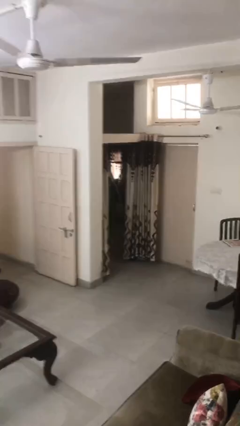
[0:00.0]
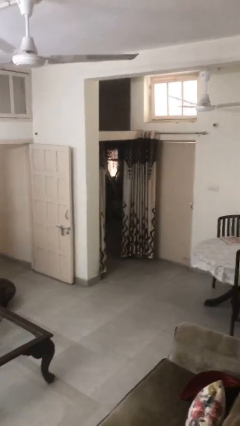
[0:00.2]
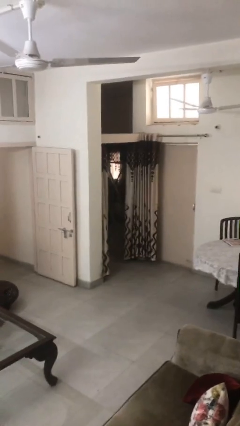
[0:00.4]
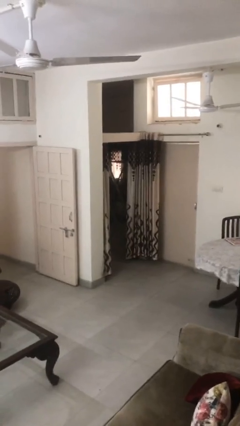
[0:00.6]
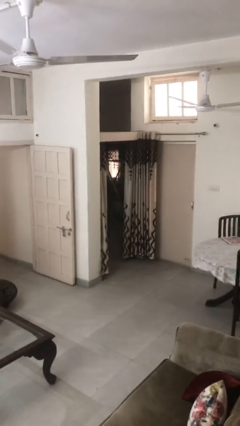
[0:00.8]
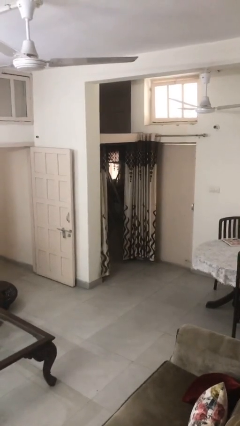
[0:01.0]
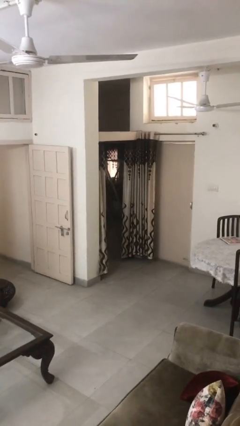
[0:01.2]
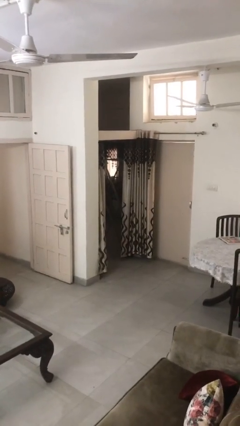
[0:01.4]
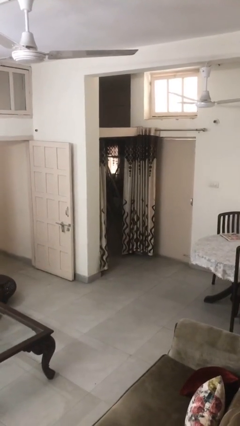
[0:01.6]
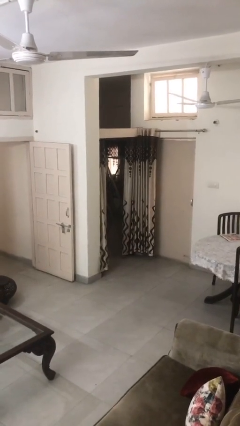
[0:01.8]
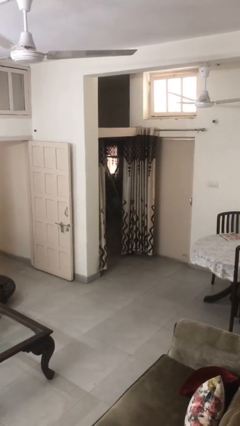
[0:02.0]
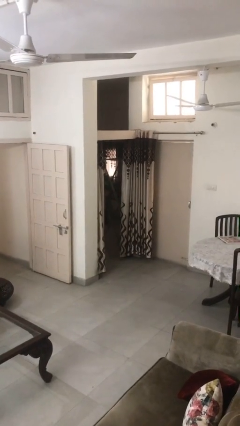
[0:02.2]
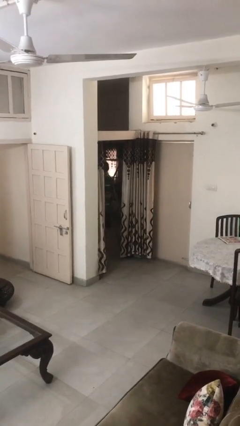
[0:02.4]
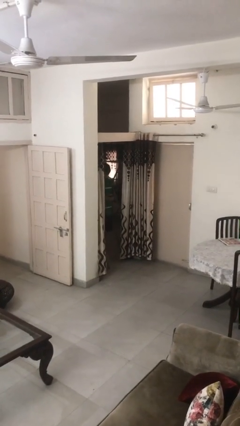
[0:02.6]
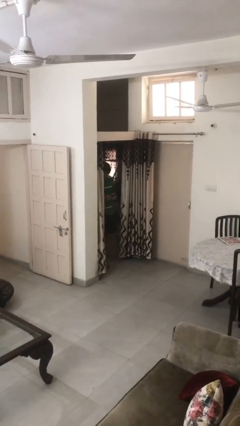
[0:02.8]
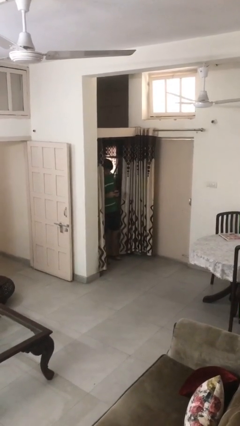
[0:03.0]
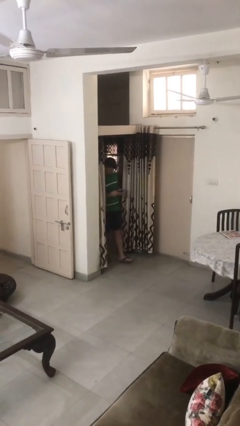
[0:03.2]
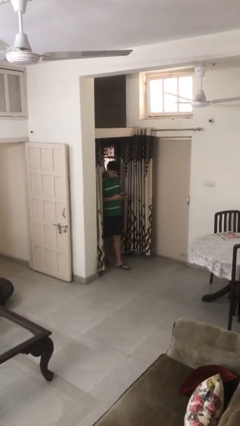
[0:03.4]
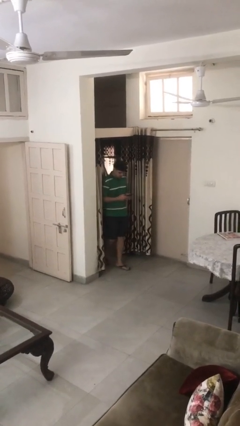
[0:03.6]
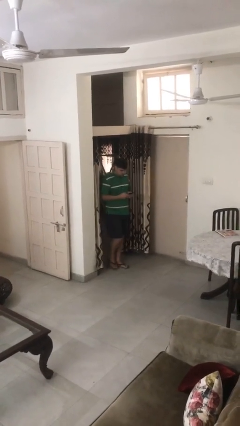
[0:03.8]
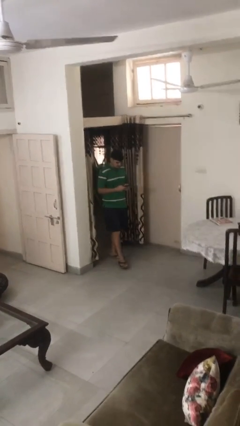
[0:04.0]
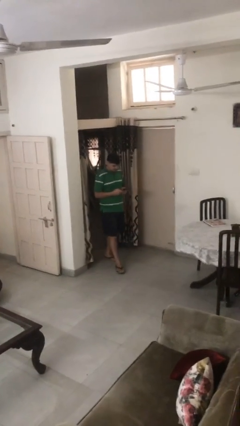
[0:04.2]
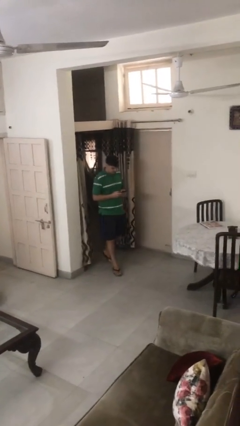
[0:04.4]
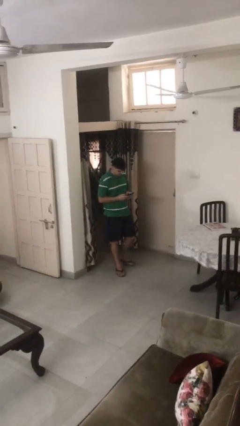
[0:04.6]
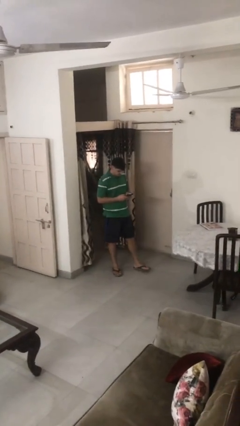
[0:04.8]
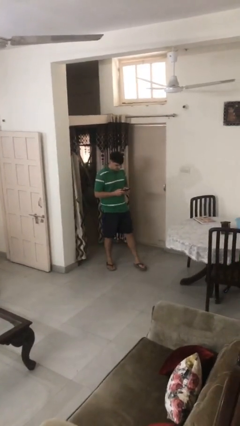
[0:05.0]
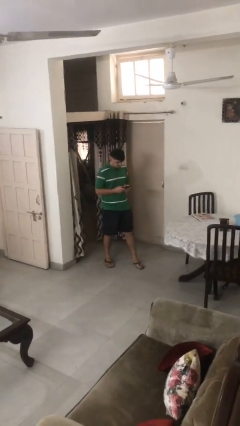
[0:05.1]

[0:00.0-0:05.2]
person enters scene through structure

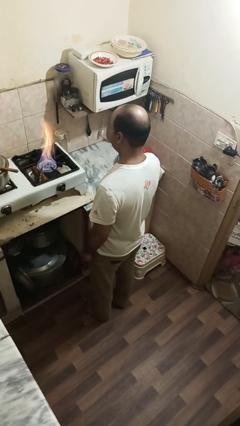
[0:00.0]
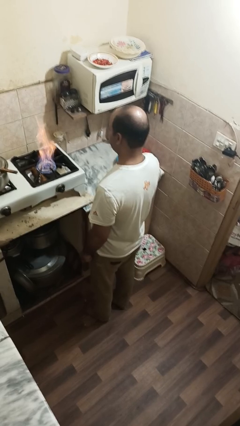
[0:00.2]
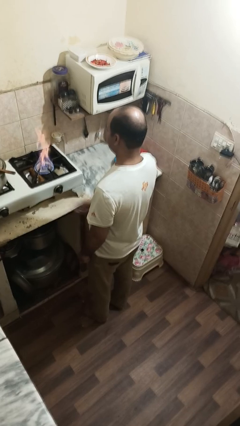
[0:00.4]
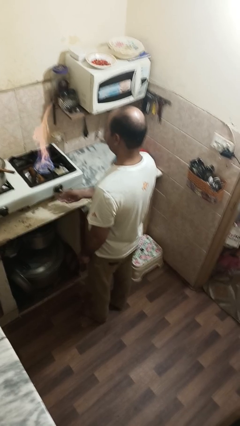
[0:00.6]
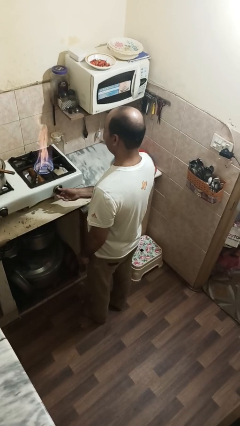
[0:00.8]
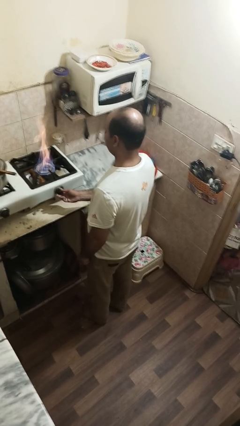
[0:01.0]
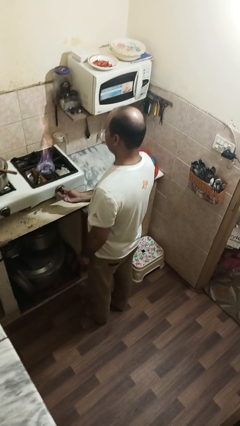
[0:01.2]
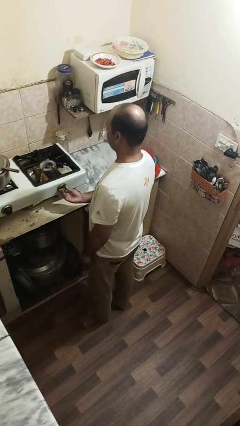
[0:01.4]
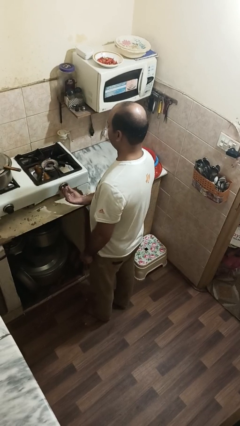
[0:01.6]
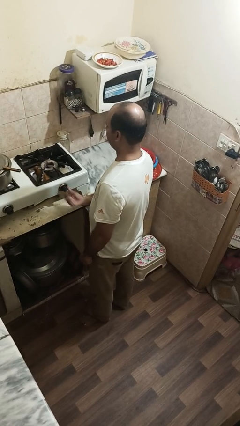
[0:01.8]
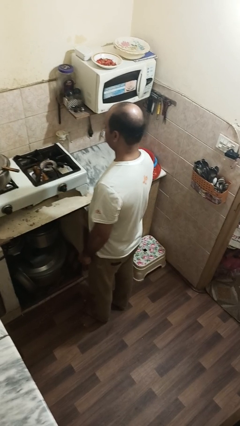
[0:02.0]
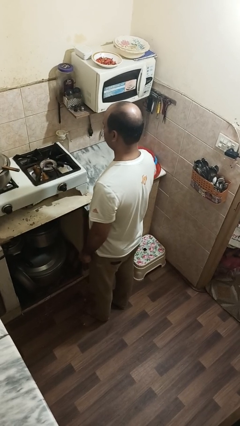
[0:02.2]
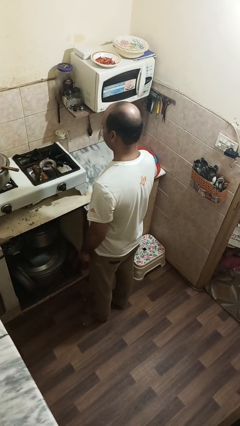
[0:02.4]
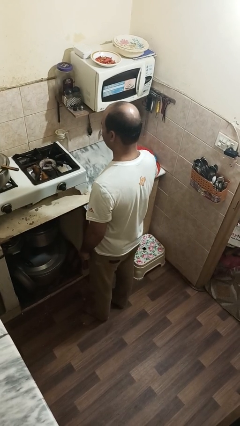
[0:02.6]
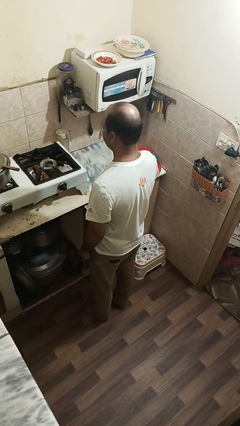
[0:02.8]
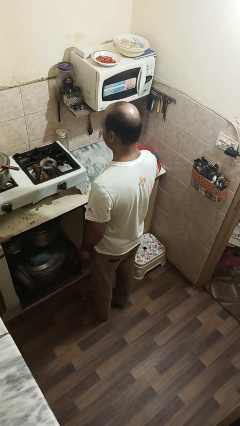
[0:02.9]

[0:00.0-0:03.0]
person turns off stovetop

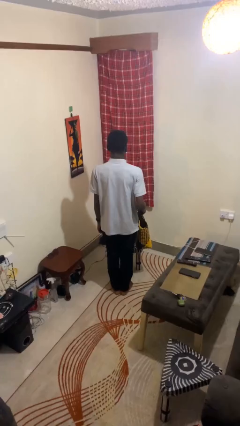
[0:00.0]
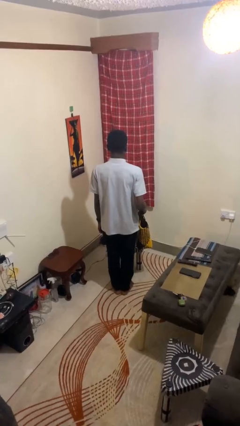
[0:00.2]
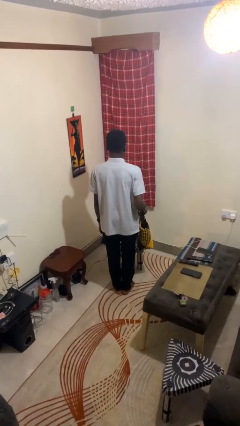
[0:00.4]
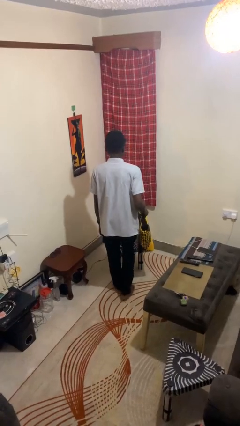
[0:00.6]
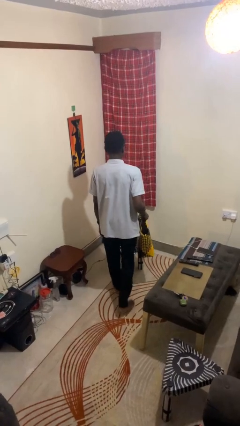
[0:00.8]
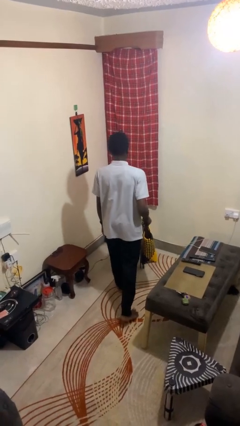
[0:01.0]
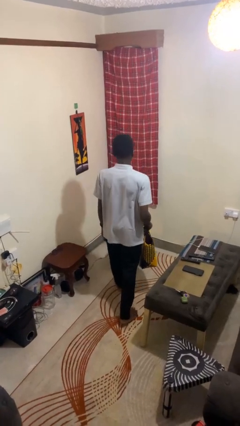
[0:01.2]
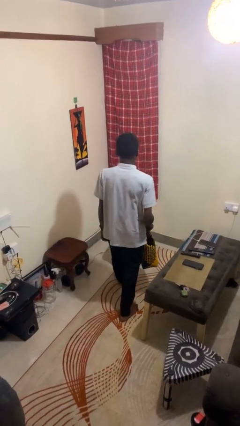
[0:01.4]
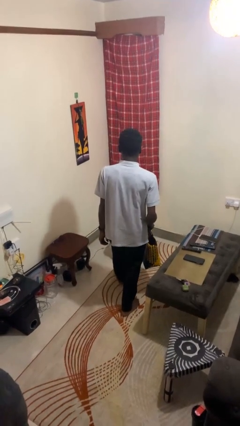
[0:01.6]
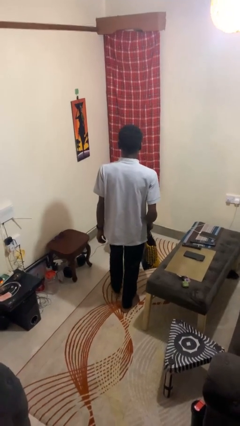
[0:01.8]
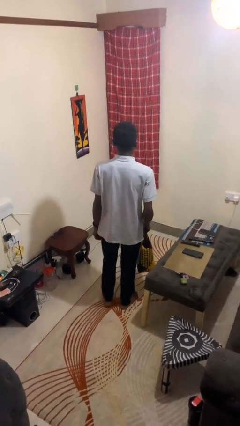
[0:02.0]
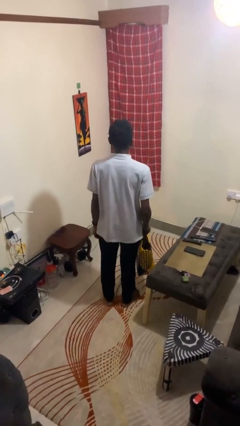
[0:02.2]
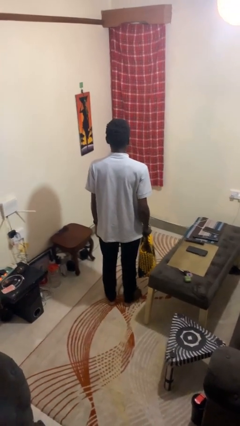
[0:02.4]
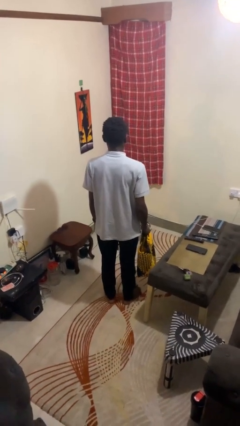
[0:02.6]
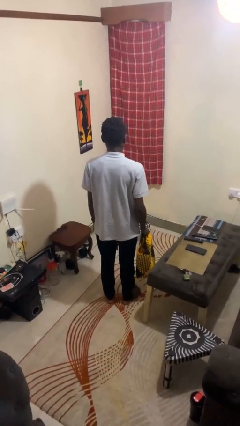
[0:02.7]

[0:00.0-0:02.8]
person carries groceries

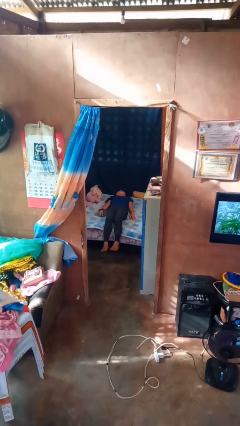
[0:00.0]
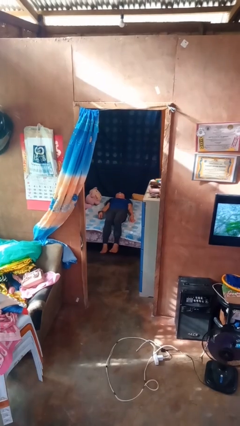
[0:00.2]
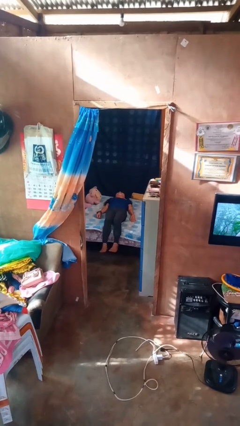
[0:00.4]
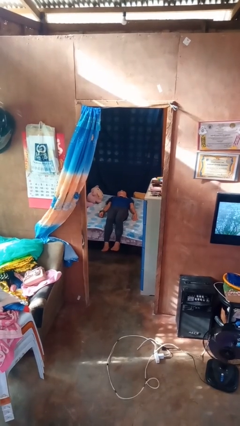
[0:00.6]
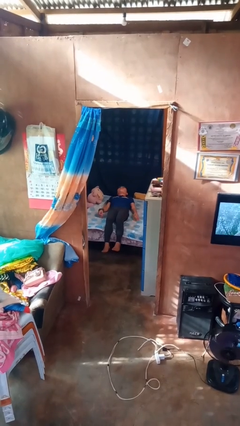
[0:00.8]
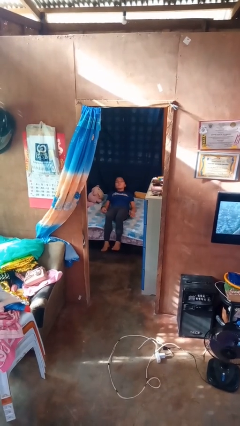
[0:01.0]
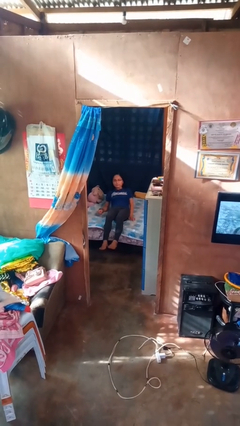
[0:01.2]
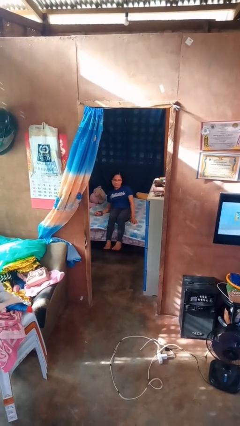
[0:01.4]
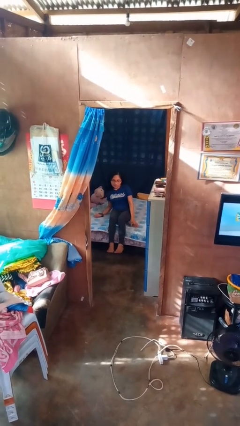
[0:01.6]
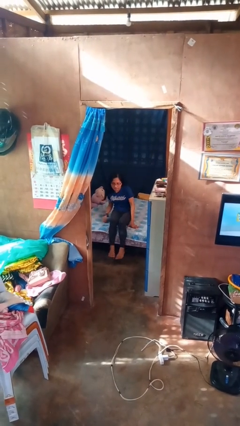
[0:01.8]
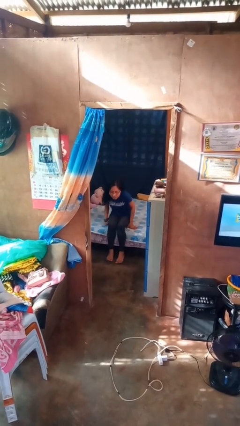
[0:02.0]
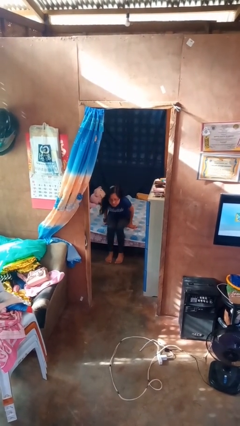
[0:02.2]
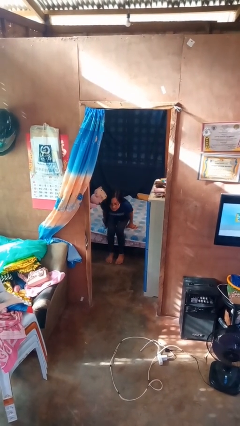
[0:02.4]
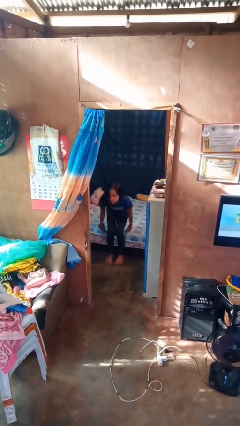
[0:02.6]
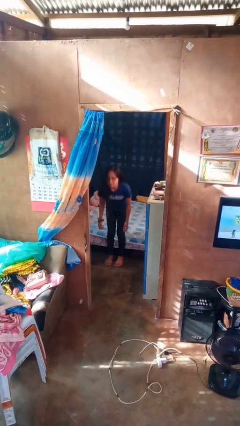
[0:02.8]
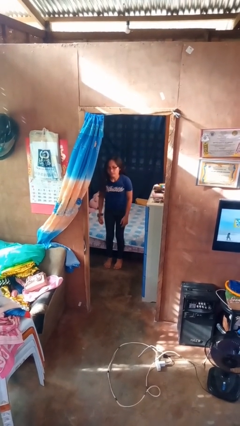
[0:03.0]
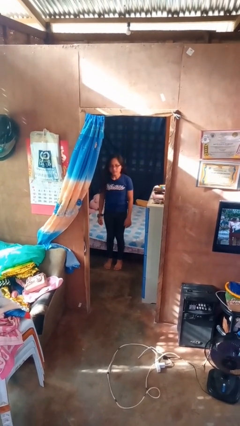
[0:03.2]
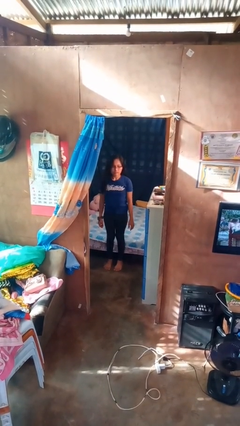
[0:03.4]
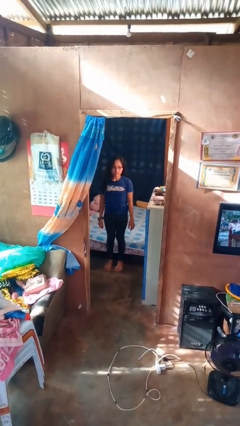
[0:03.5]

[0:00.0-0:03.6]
person stands up

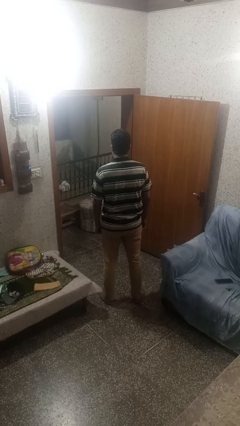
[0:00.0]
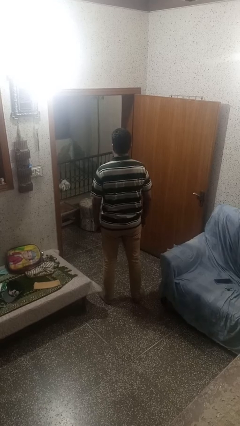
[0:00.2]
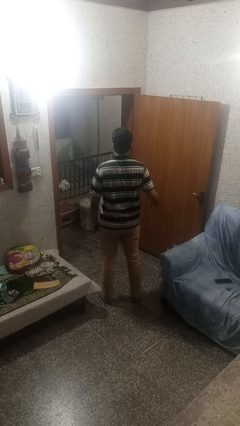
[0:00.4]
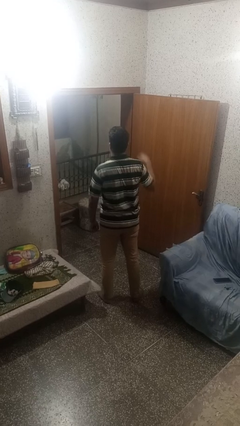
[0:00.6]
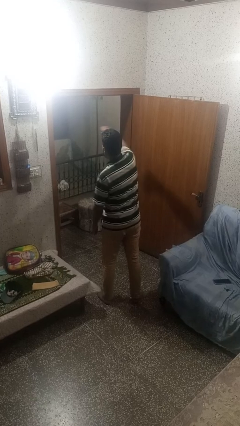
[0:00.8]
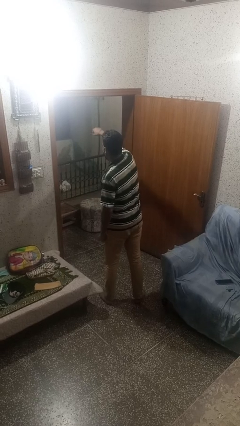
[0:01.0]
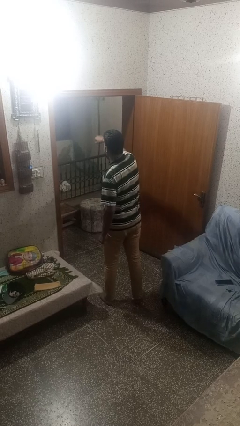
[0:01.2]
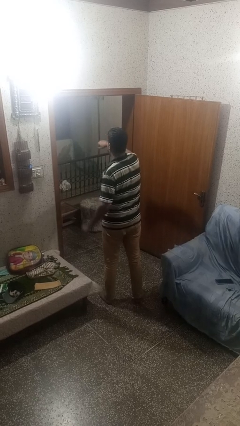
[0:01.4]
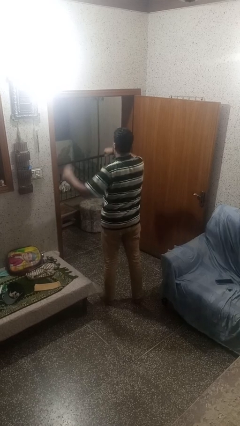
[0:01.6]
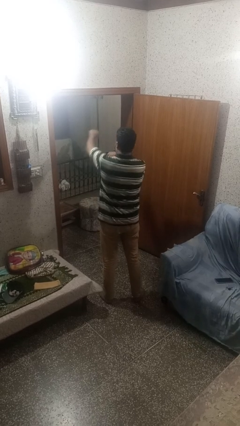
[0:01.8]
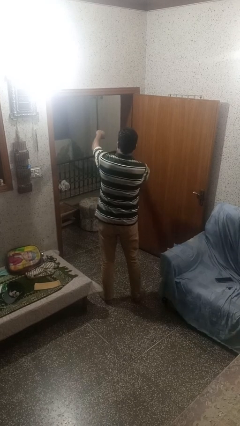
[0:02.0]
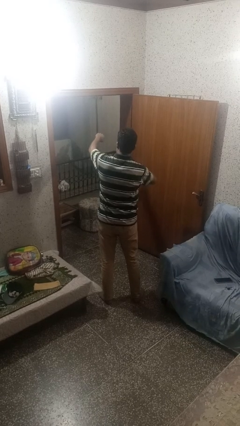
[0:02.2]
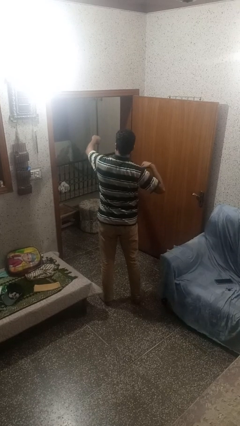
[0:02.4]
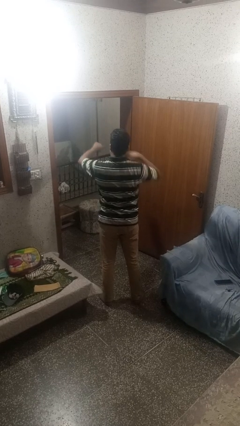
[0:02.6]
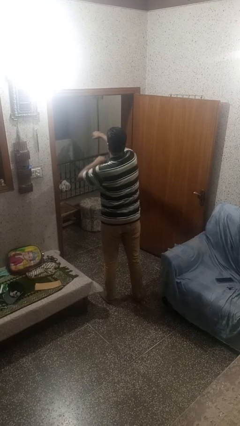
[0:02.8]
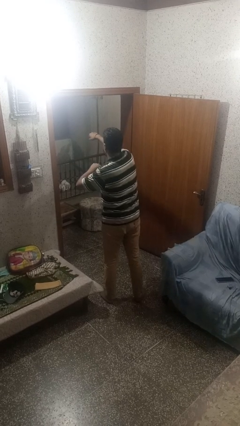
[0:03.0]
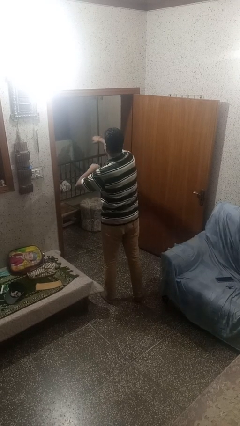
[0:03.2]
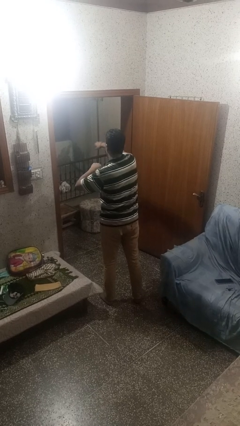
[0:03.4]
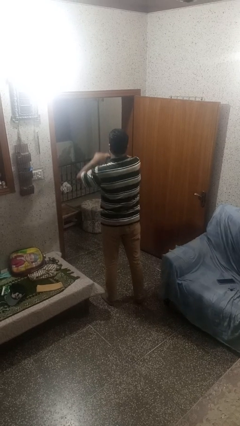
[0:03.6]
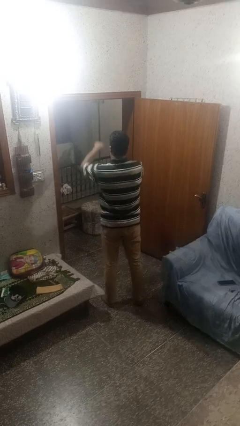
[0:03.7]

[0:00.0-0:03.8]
person punches
